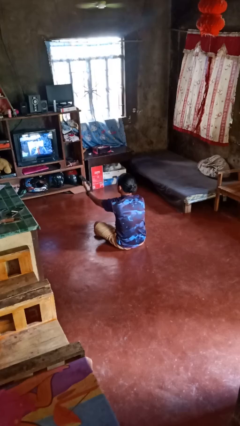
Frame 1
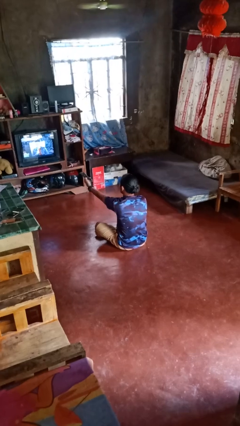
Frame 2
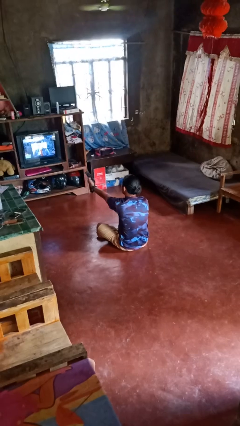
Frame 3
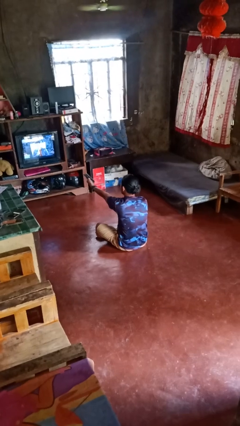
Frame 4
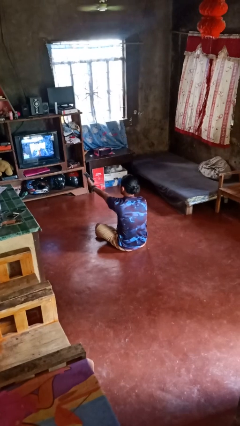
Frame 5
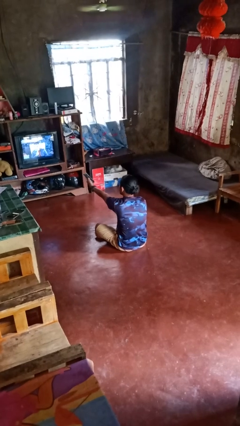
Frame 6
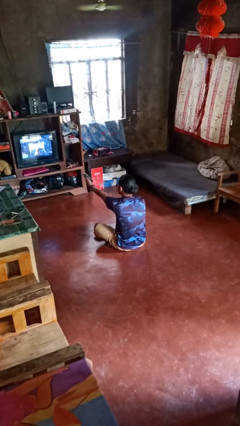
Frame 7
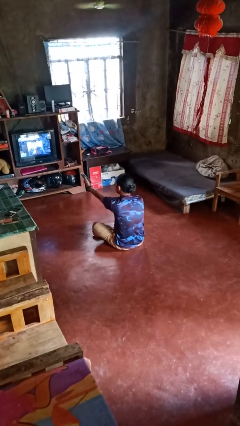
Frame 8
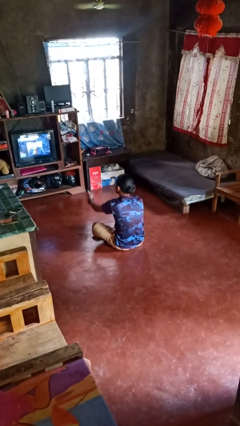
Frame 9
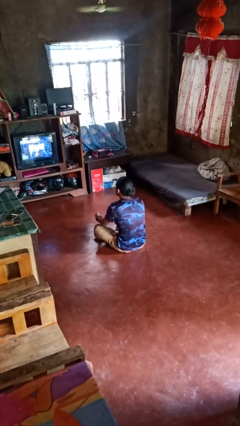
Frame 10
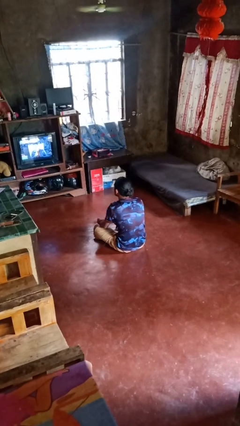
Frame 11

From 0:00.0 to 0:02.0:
person uses television remote

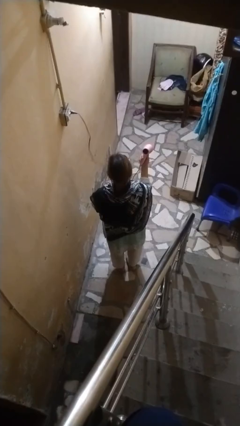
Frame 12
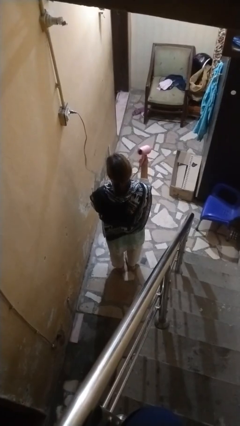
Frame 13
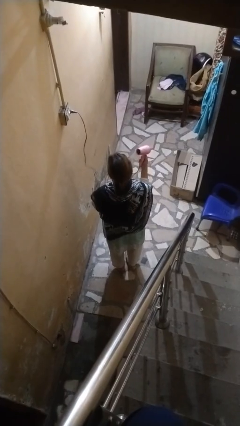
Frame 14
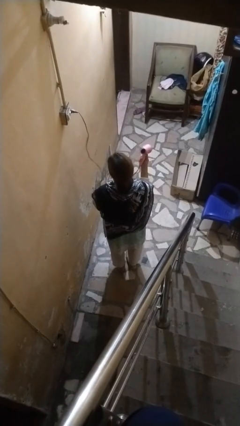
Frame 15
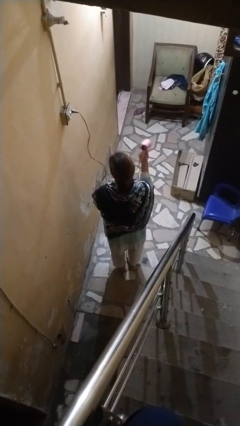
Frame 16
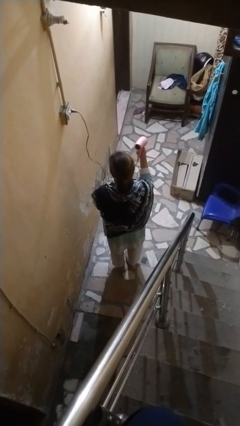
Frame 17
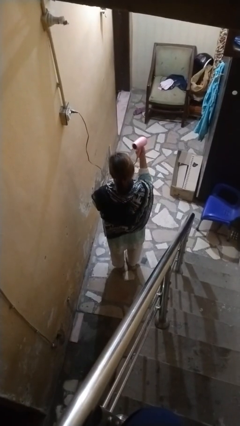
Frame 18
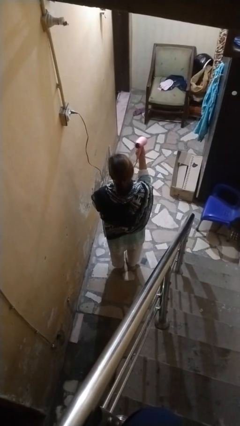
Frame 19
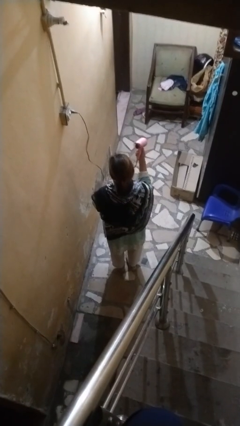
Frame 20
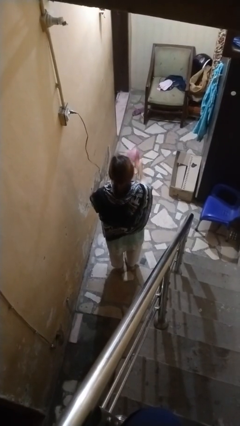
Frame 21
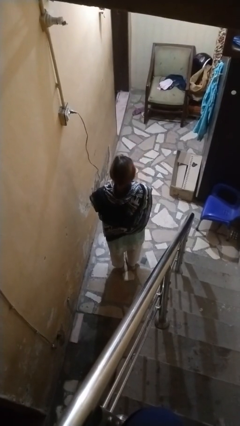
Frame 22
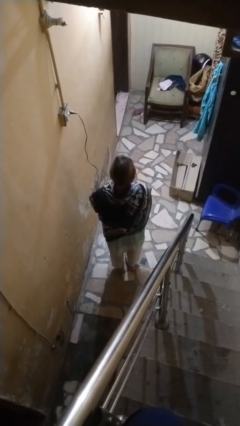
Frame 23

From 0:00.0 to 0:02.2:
person dries hair with hairdryer

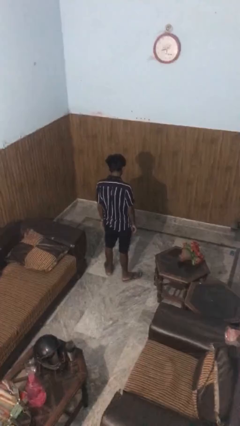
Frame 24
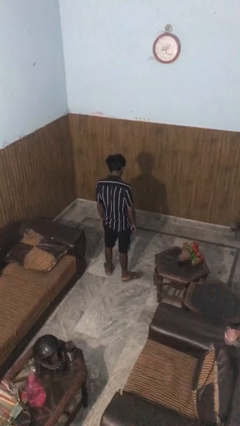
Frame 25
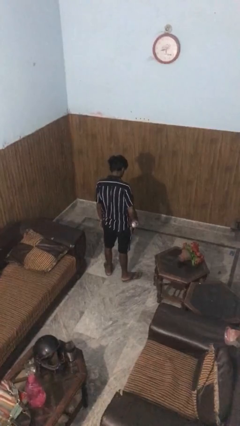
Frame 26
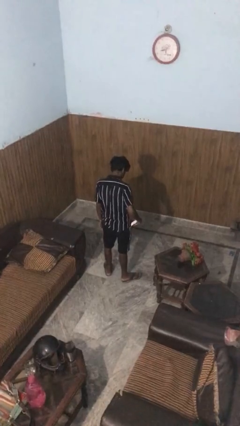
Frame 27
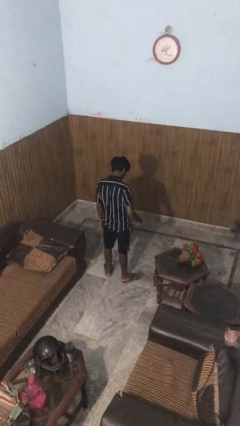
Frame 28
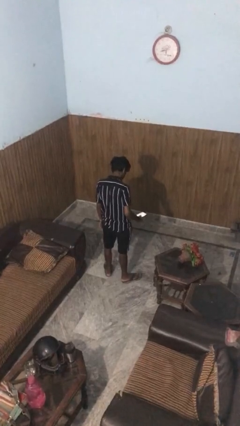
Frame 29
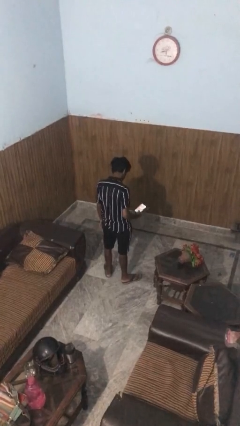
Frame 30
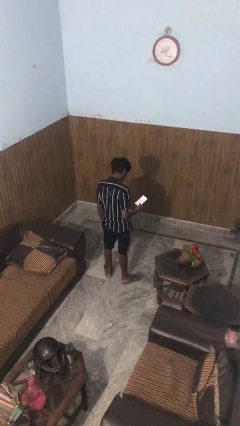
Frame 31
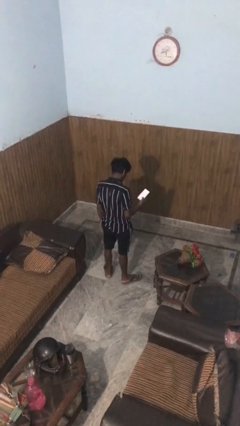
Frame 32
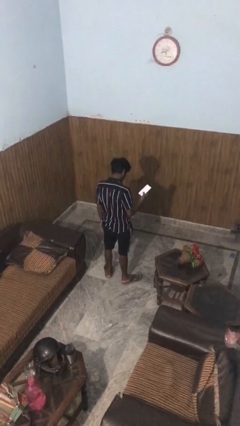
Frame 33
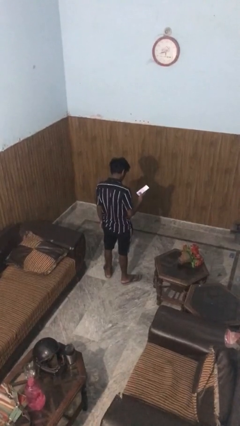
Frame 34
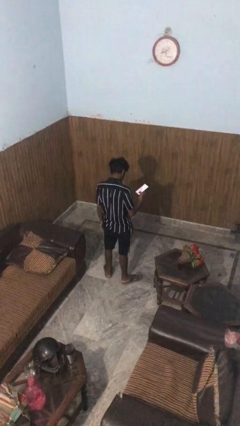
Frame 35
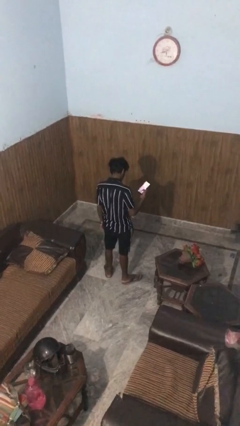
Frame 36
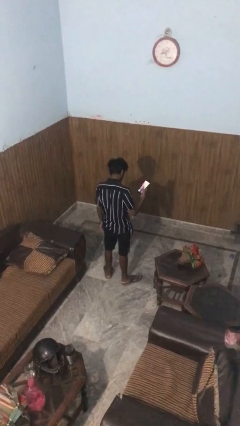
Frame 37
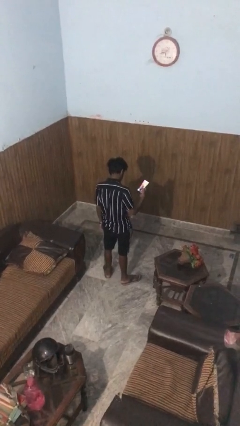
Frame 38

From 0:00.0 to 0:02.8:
person takes phone from pocket

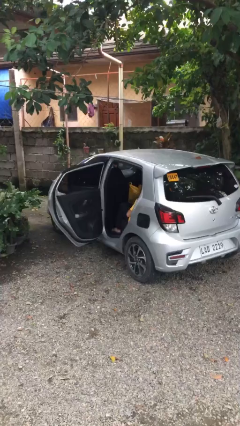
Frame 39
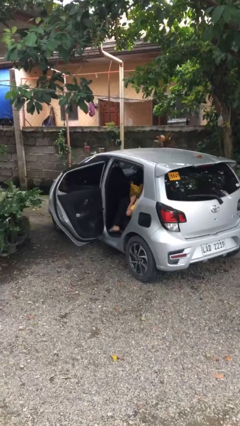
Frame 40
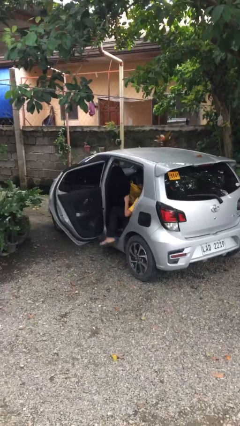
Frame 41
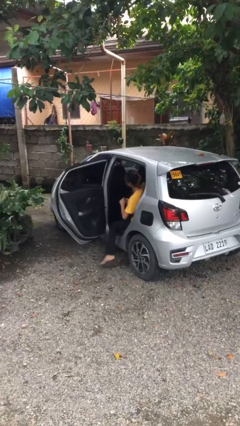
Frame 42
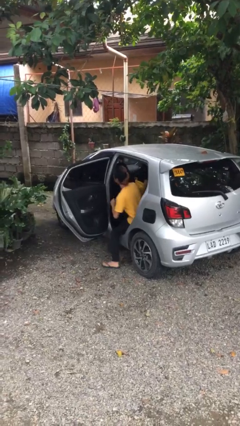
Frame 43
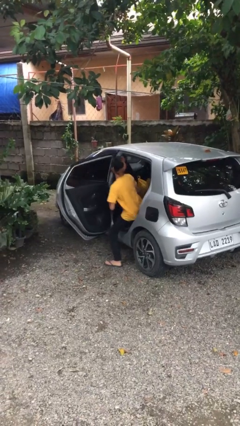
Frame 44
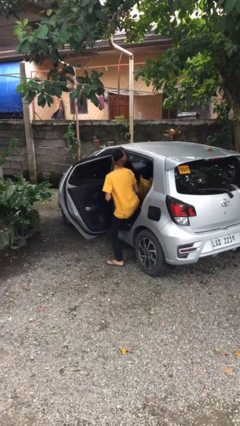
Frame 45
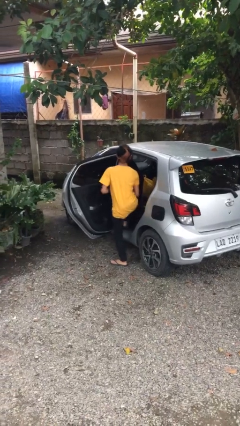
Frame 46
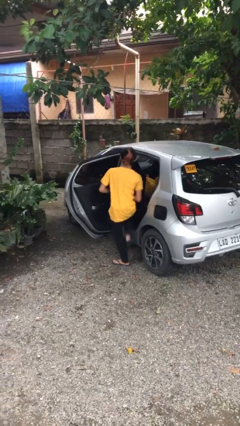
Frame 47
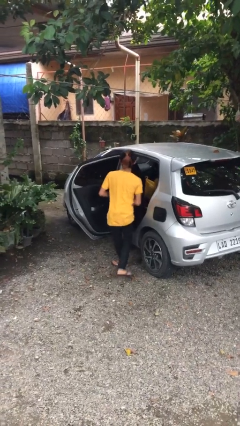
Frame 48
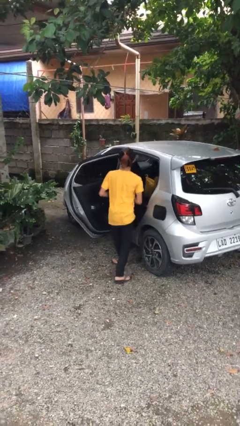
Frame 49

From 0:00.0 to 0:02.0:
person exits car

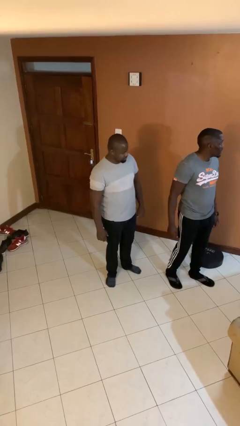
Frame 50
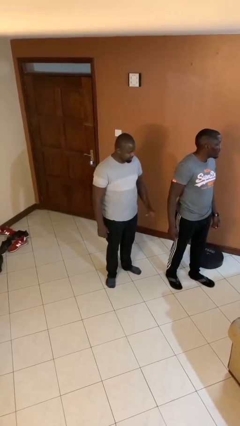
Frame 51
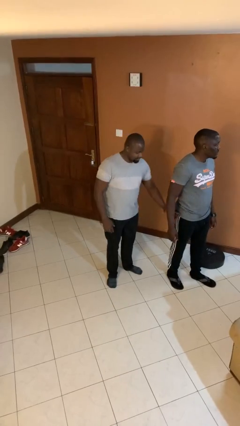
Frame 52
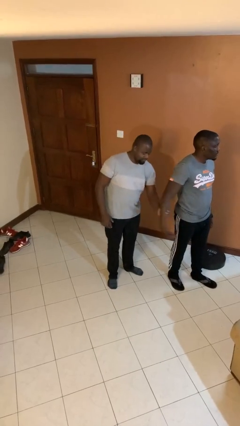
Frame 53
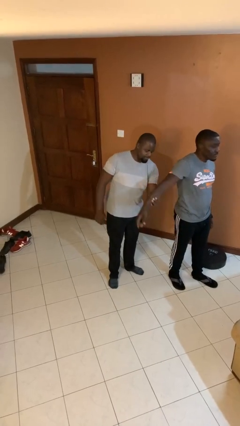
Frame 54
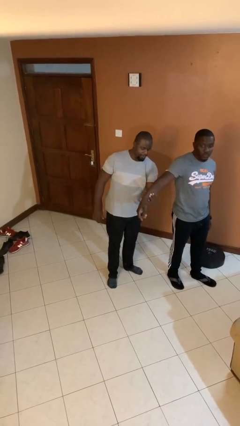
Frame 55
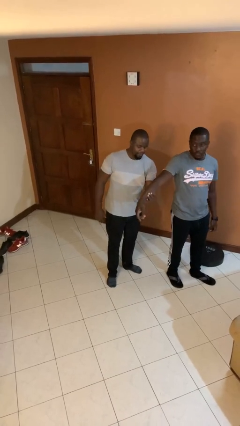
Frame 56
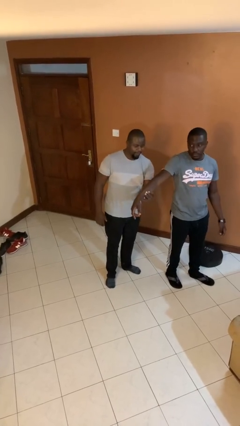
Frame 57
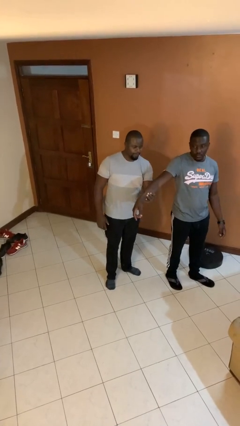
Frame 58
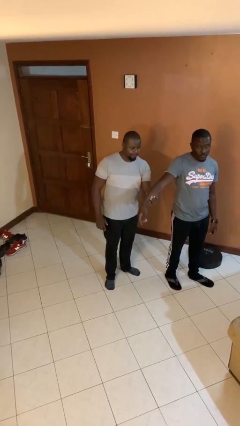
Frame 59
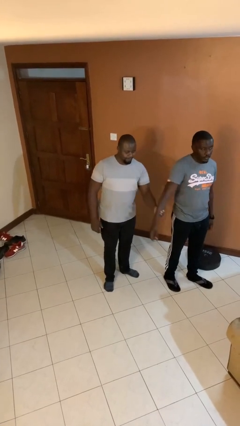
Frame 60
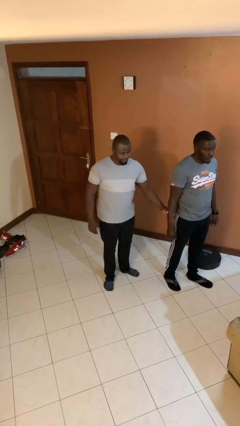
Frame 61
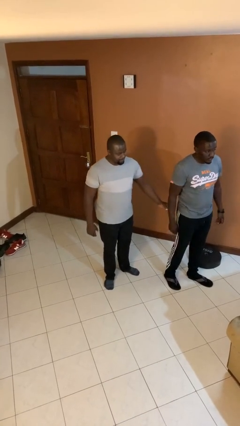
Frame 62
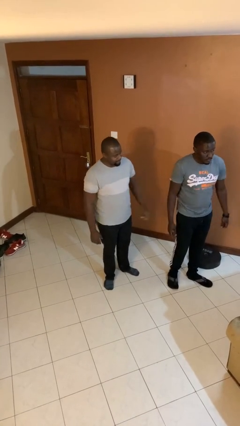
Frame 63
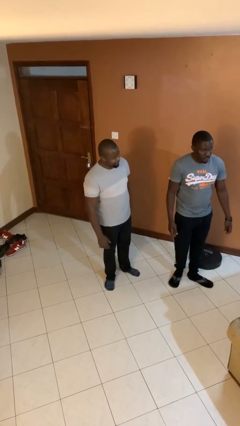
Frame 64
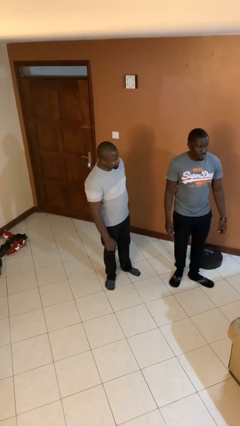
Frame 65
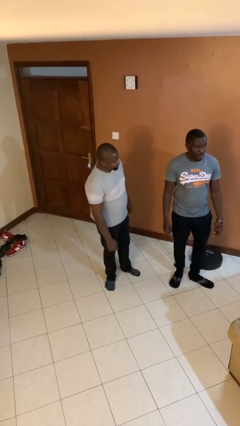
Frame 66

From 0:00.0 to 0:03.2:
person grabs person by forearm

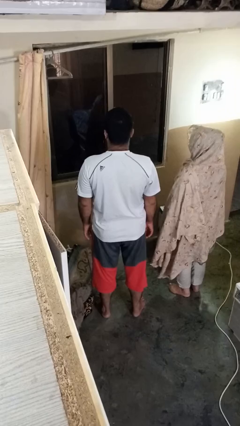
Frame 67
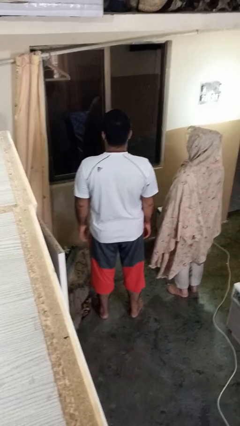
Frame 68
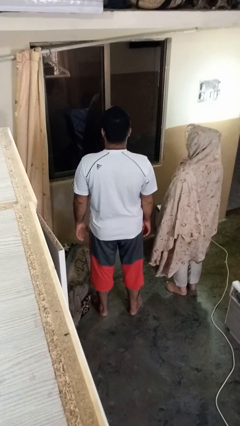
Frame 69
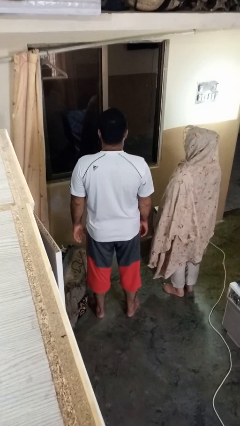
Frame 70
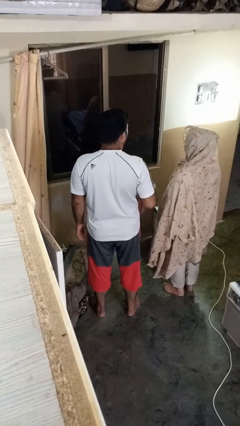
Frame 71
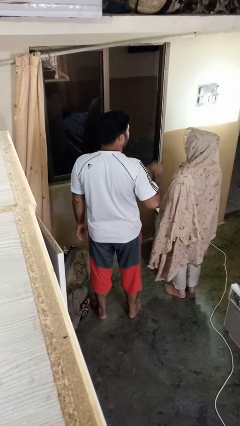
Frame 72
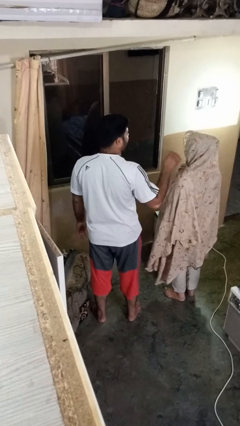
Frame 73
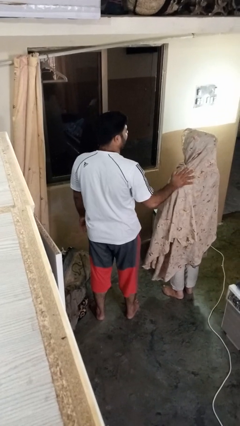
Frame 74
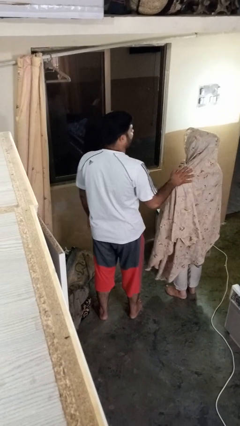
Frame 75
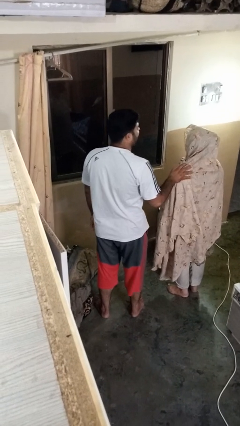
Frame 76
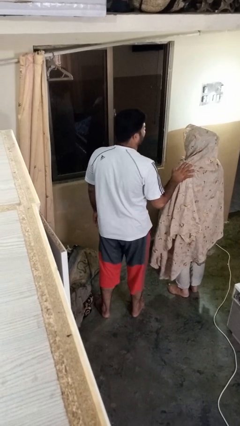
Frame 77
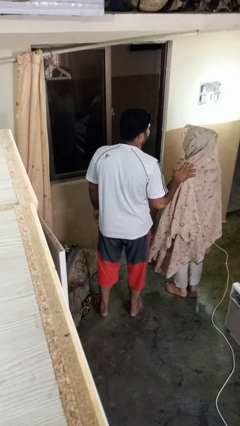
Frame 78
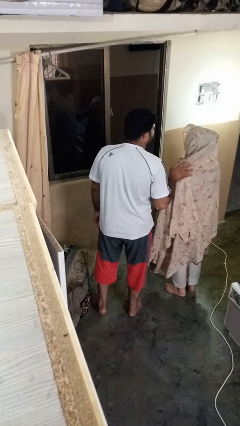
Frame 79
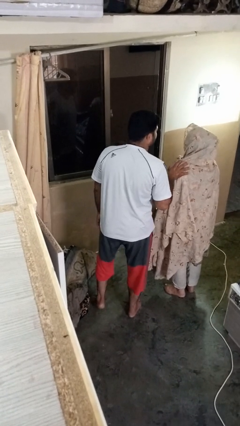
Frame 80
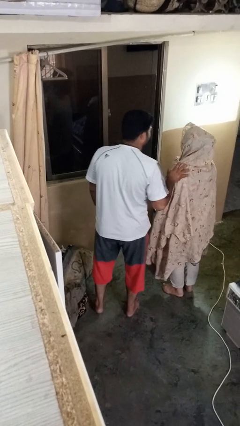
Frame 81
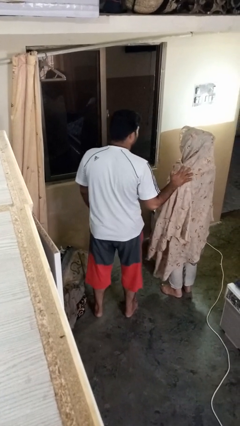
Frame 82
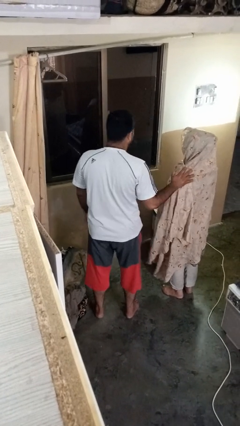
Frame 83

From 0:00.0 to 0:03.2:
person shoves person

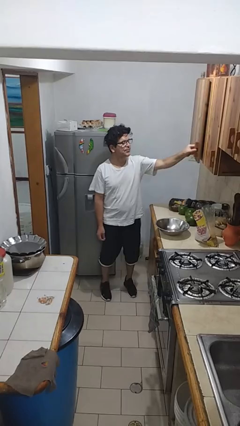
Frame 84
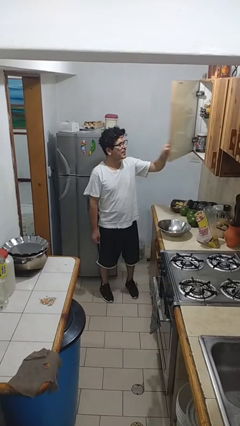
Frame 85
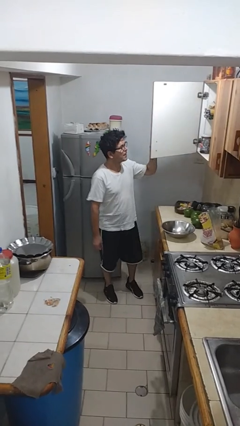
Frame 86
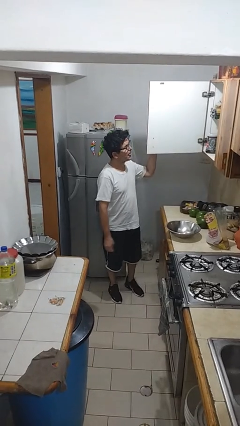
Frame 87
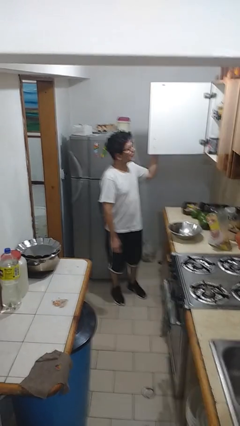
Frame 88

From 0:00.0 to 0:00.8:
person opens kitchen drawer

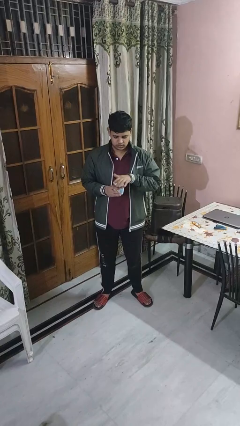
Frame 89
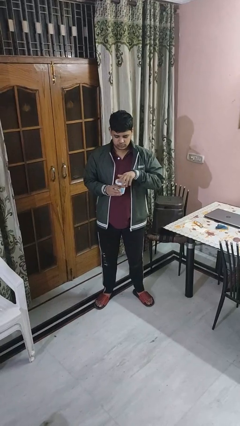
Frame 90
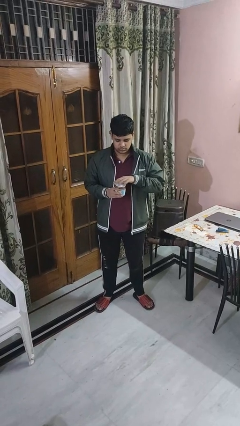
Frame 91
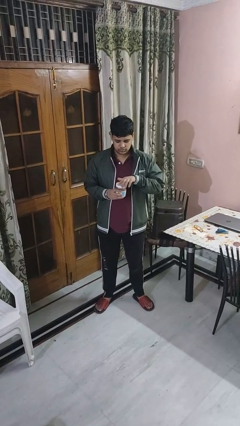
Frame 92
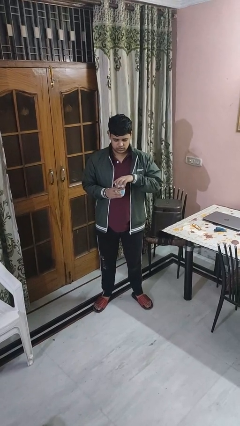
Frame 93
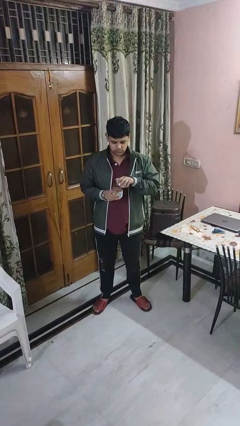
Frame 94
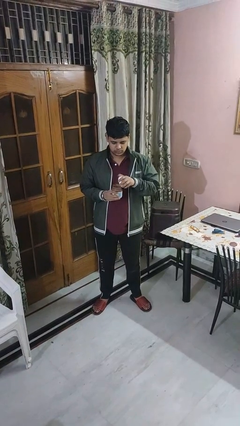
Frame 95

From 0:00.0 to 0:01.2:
person opens jar
